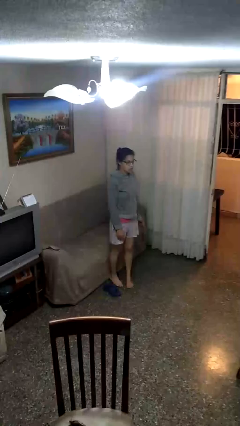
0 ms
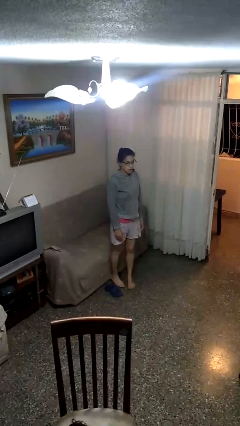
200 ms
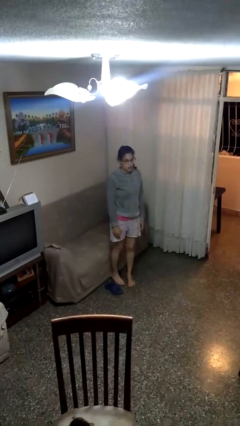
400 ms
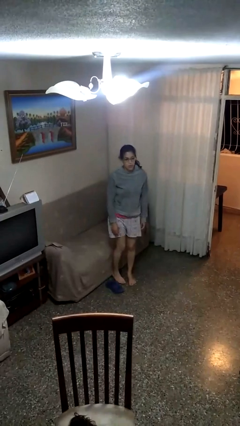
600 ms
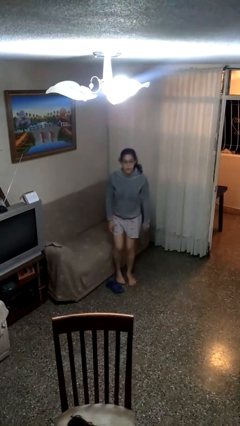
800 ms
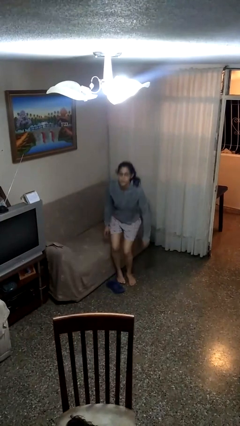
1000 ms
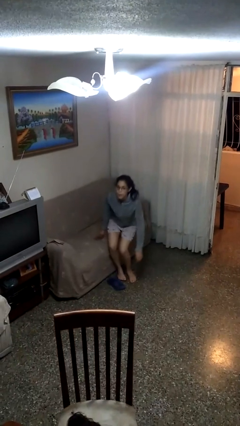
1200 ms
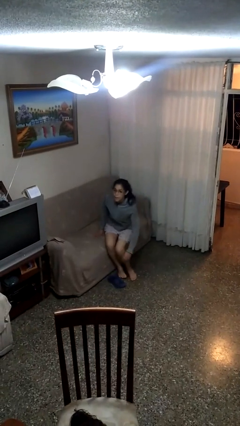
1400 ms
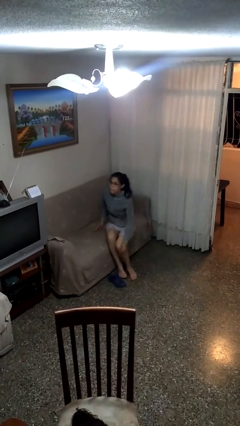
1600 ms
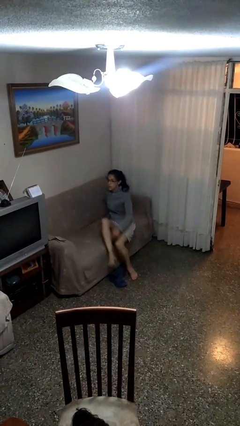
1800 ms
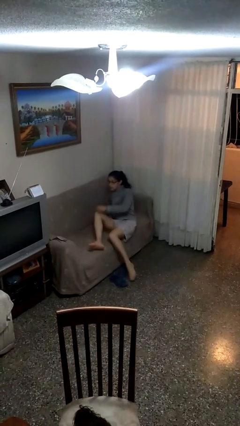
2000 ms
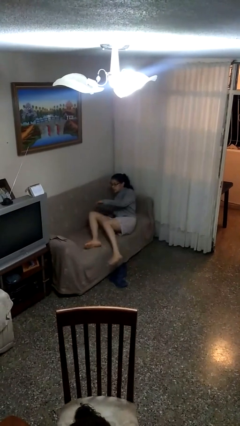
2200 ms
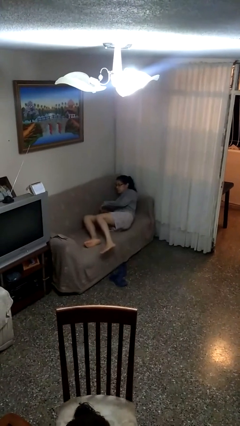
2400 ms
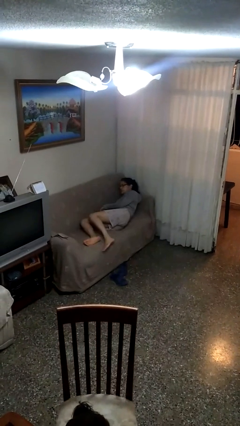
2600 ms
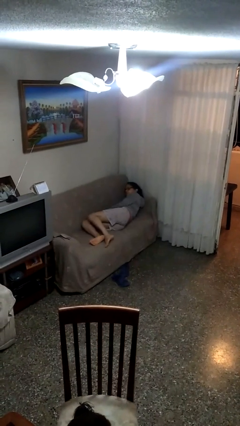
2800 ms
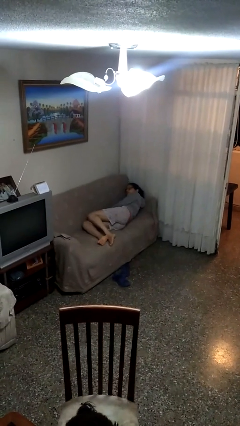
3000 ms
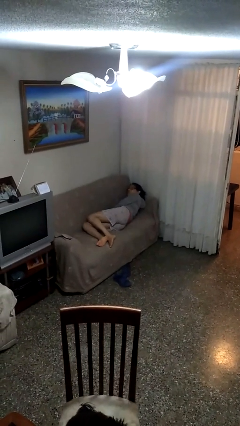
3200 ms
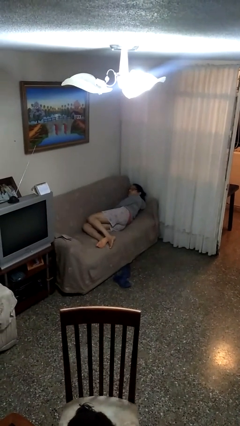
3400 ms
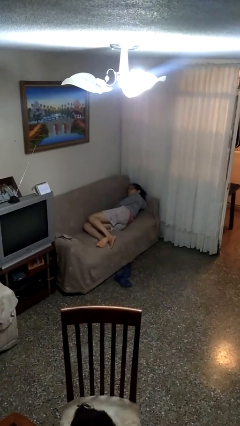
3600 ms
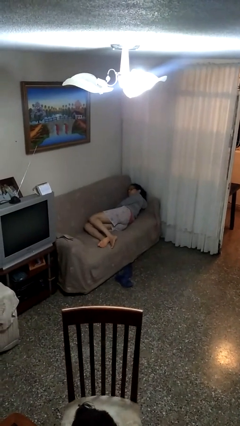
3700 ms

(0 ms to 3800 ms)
person lies down on couch

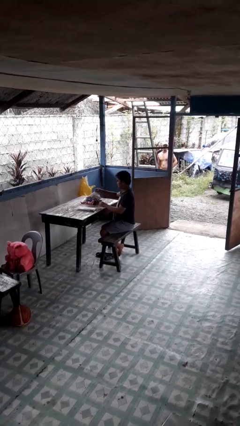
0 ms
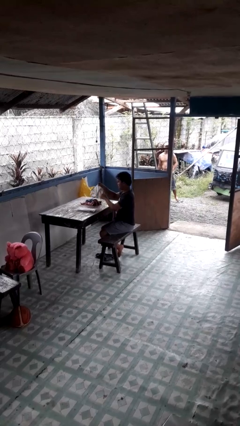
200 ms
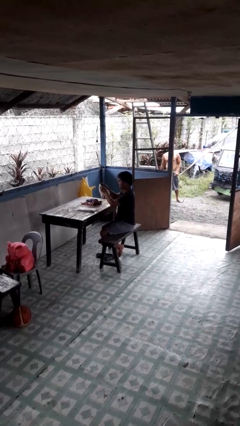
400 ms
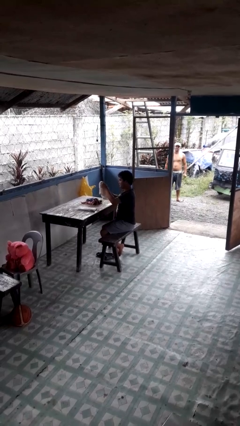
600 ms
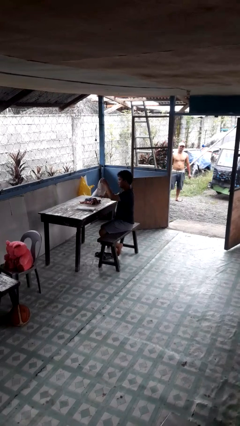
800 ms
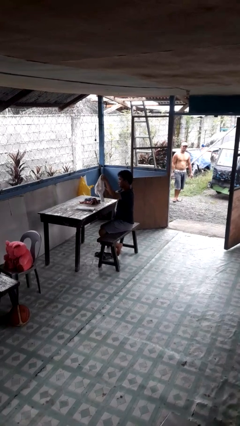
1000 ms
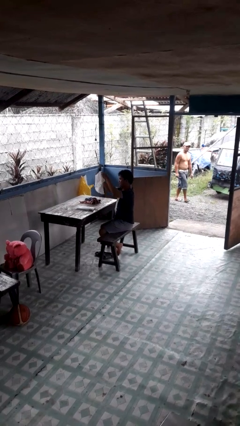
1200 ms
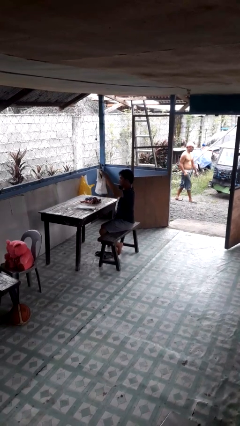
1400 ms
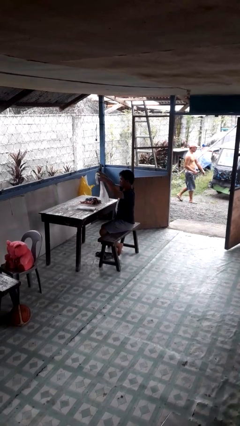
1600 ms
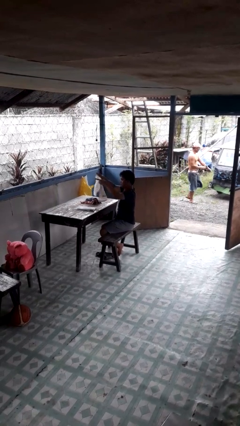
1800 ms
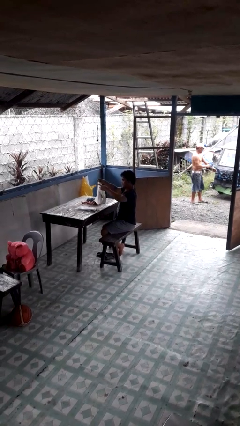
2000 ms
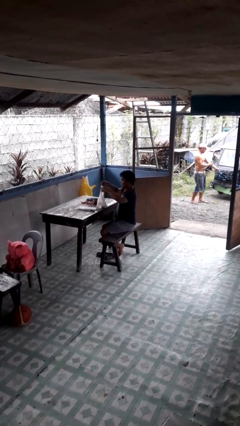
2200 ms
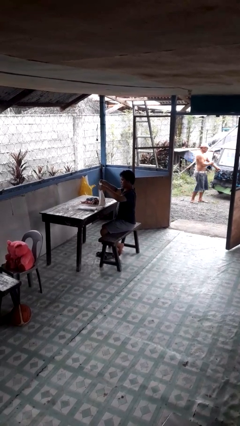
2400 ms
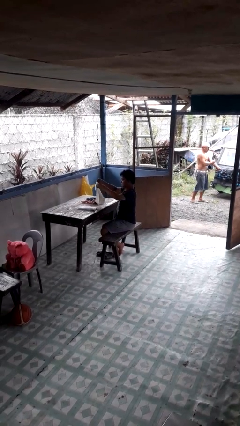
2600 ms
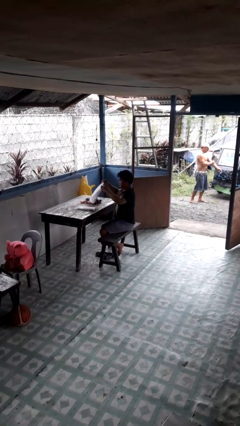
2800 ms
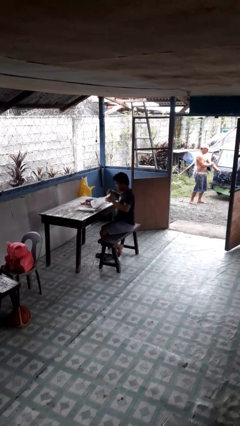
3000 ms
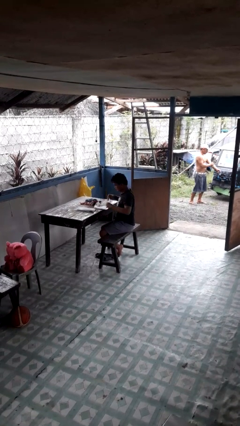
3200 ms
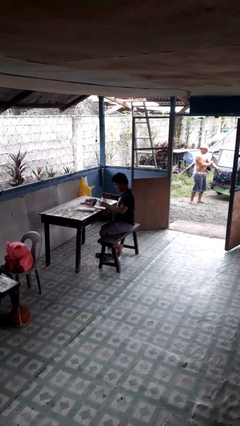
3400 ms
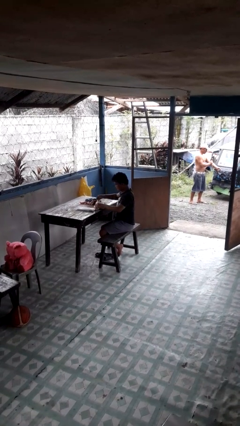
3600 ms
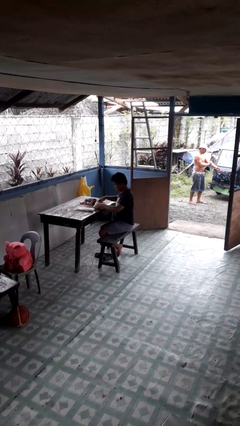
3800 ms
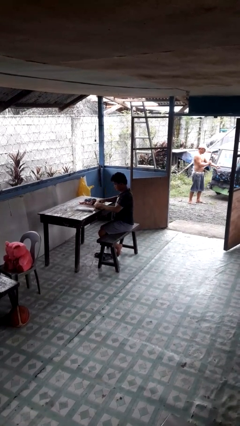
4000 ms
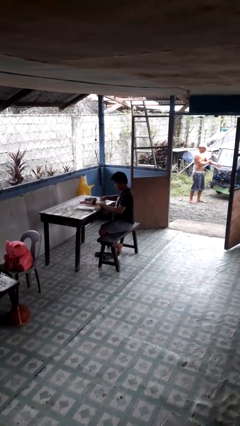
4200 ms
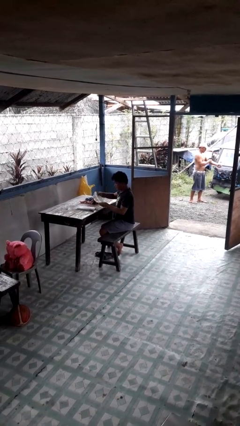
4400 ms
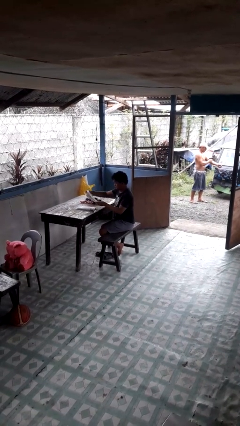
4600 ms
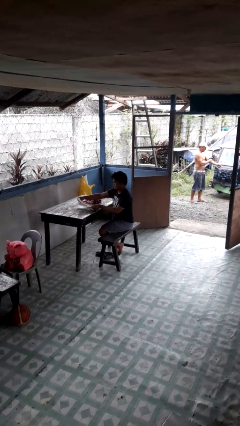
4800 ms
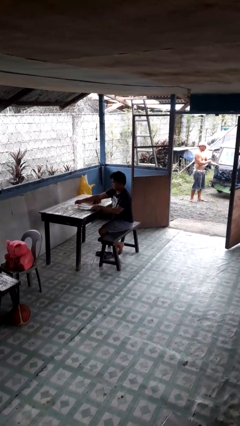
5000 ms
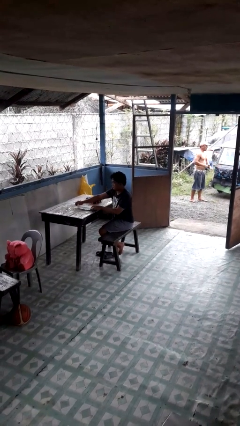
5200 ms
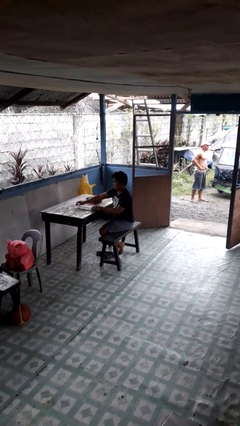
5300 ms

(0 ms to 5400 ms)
person folds towel

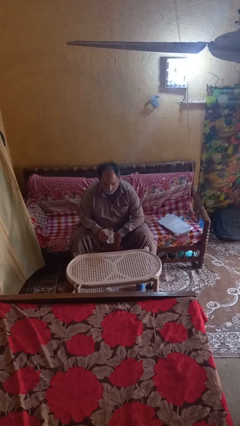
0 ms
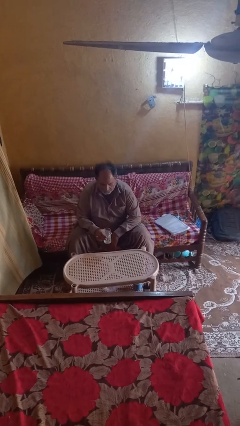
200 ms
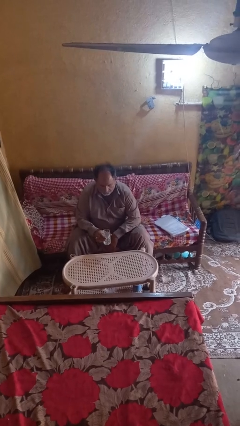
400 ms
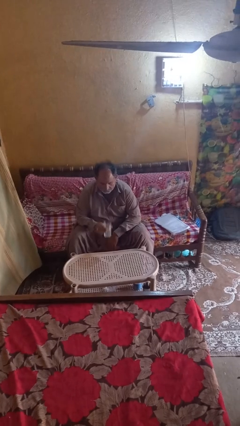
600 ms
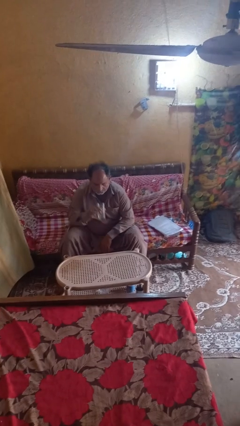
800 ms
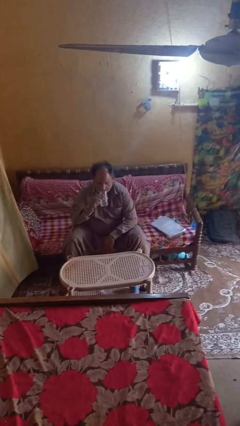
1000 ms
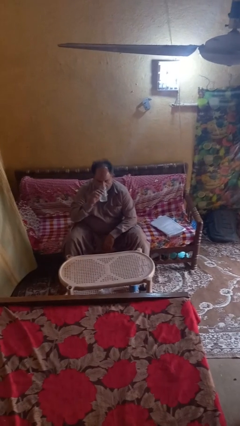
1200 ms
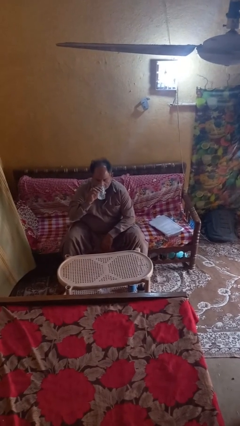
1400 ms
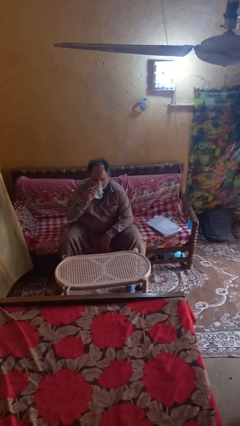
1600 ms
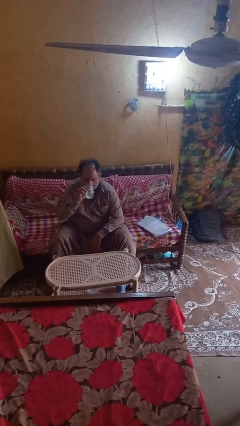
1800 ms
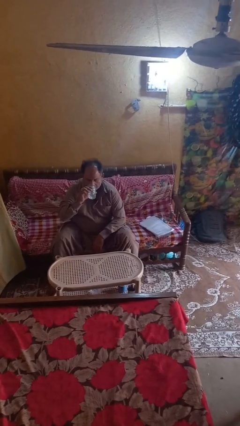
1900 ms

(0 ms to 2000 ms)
person drinks from shotglass

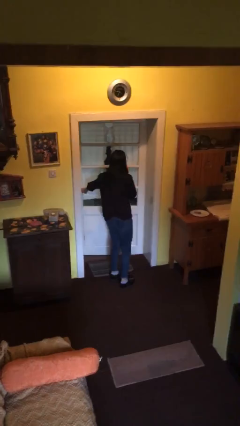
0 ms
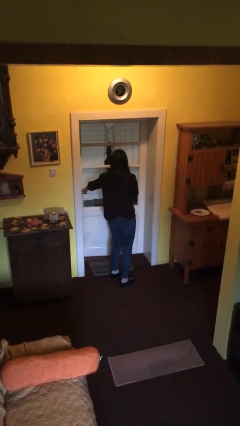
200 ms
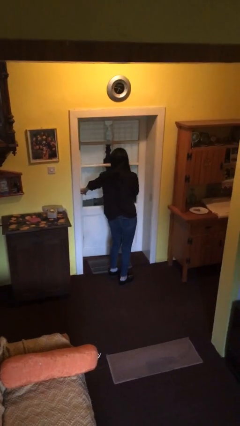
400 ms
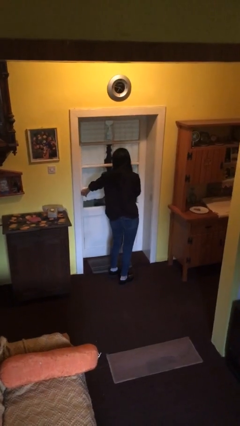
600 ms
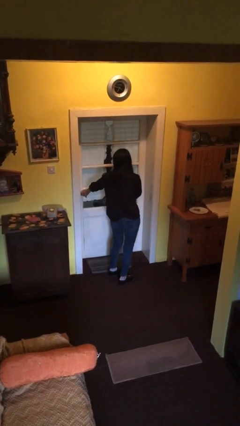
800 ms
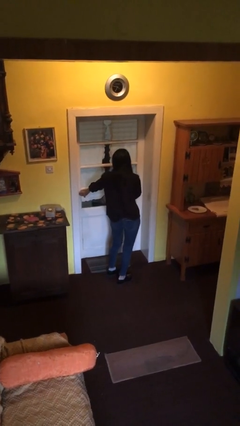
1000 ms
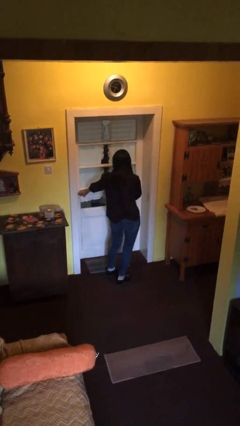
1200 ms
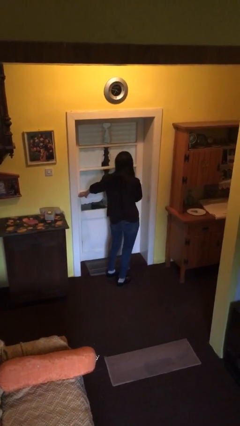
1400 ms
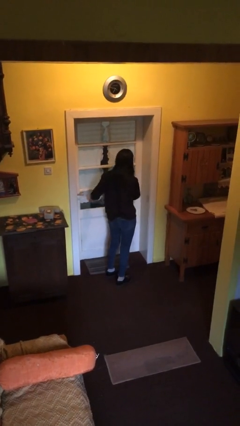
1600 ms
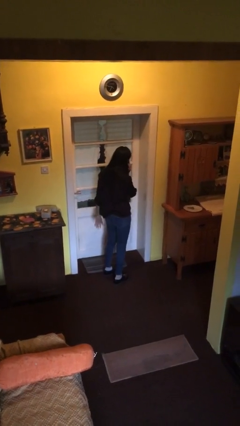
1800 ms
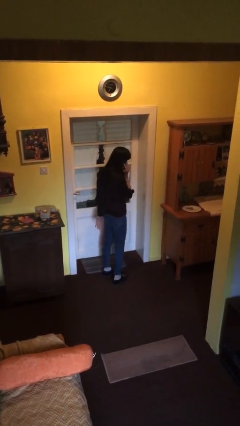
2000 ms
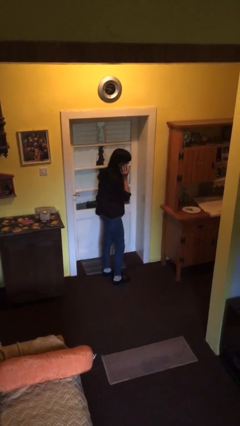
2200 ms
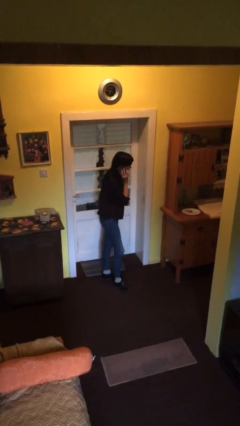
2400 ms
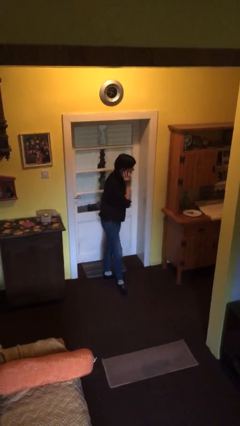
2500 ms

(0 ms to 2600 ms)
person closes facility door

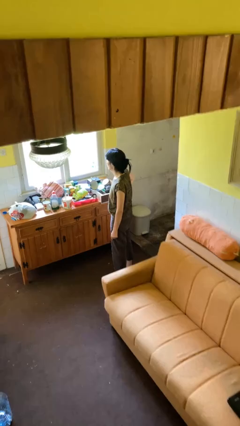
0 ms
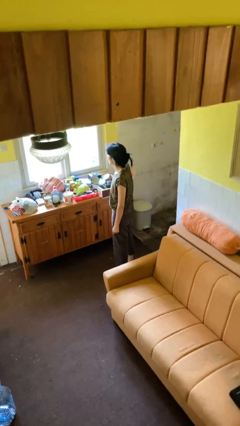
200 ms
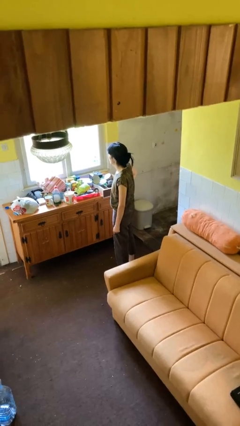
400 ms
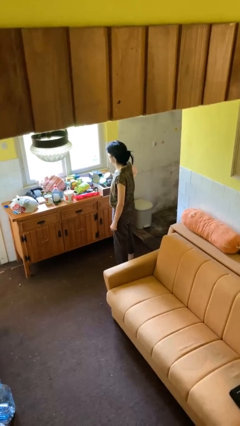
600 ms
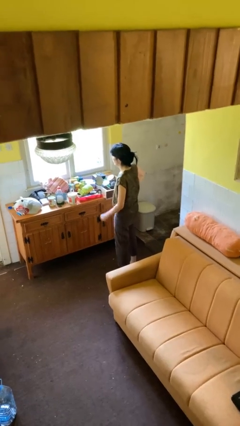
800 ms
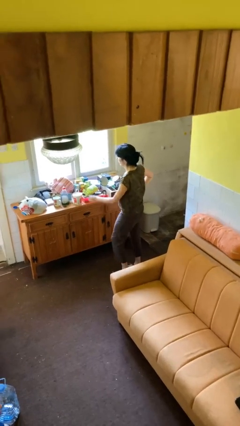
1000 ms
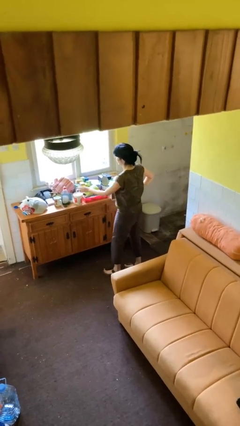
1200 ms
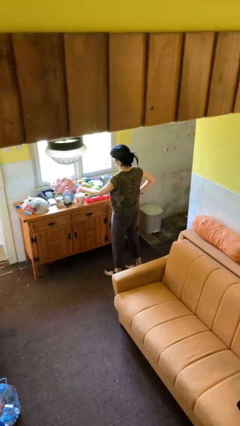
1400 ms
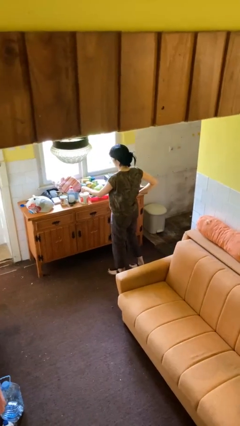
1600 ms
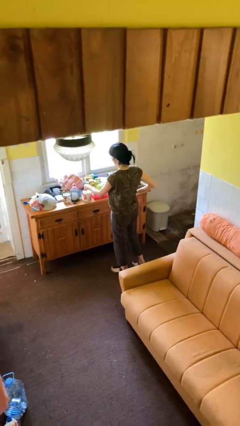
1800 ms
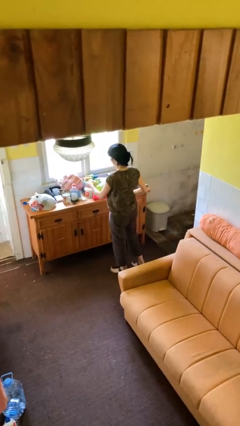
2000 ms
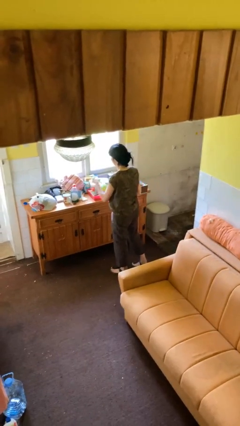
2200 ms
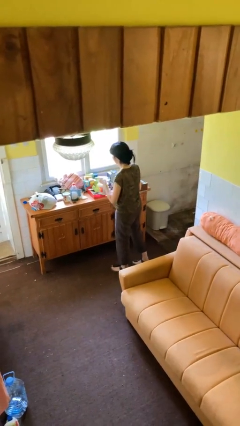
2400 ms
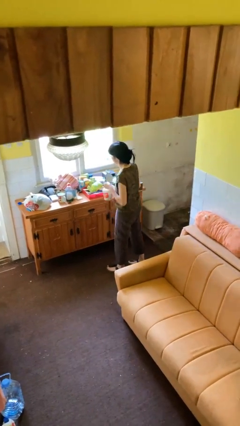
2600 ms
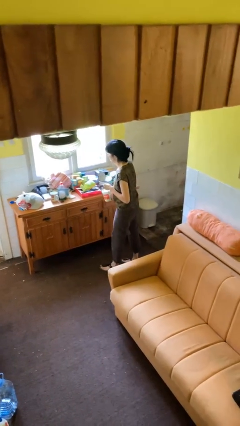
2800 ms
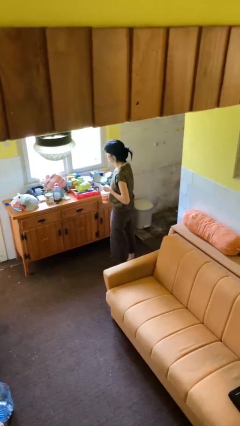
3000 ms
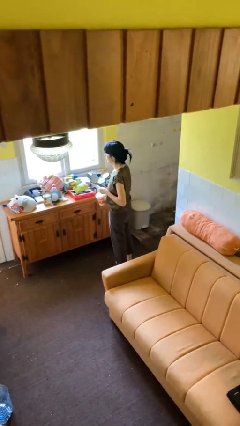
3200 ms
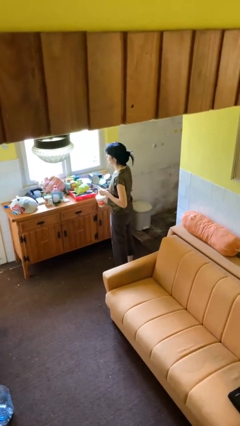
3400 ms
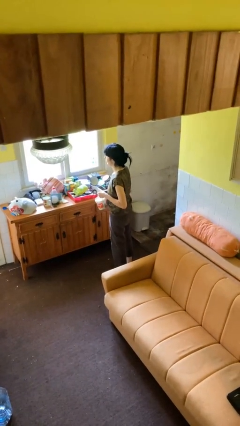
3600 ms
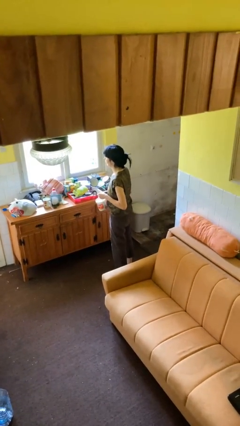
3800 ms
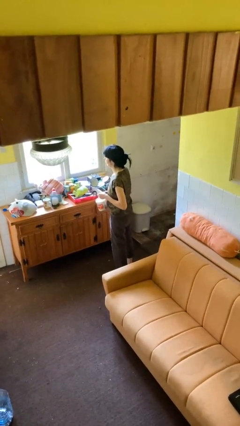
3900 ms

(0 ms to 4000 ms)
person picks up object from countertop
